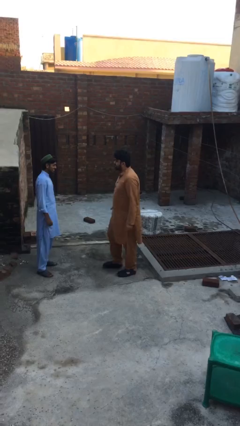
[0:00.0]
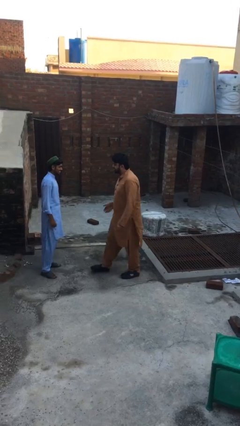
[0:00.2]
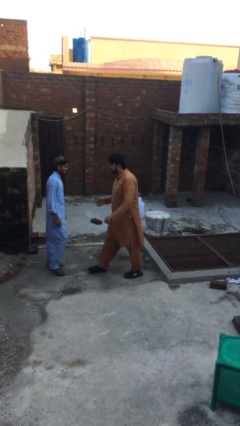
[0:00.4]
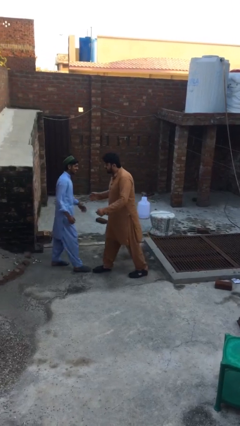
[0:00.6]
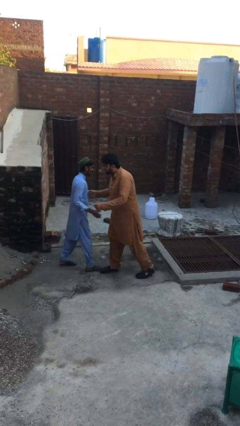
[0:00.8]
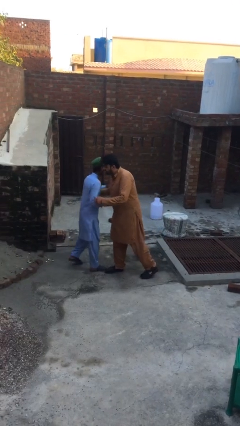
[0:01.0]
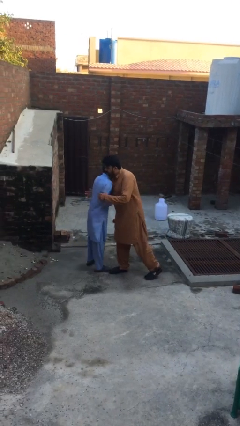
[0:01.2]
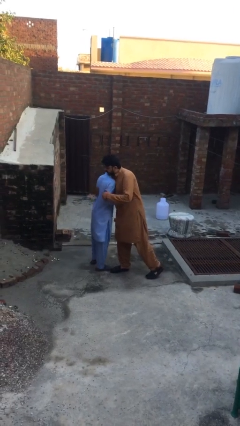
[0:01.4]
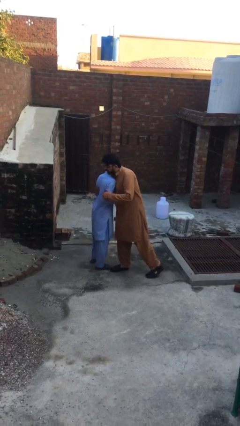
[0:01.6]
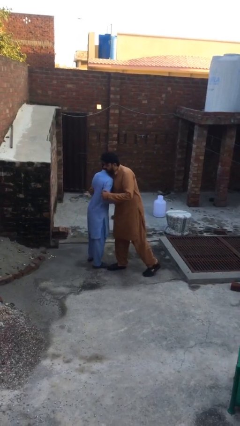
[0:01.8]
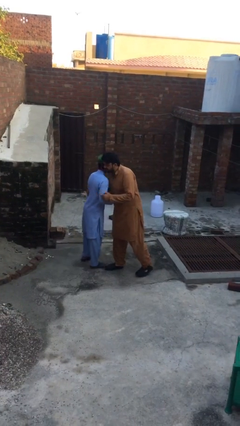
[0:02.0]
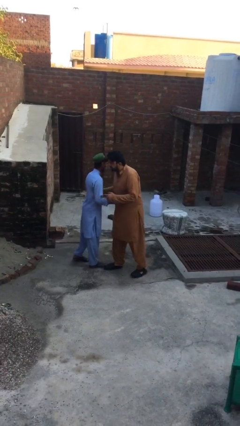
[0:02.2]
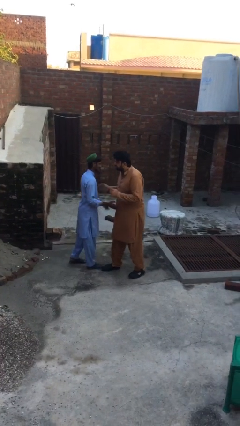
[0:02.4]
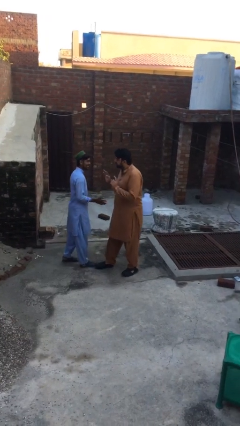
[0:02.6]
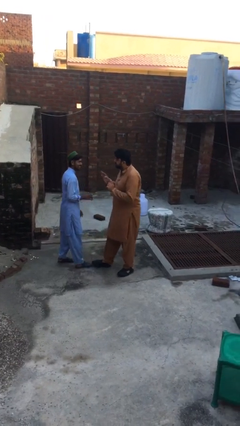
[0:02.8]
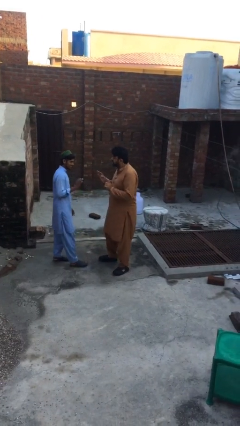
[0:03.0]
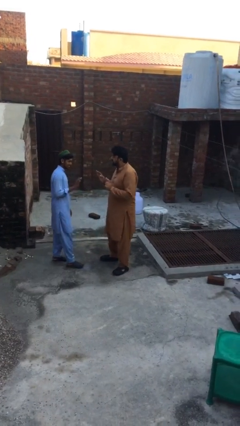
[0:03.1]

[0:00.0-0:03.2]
person embraces person

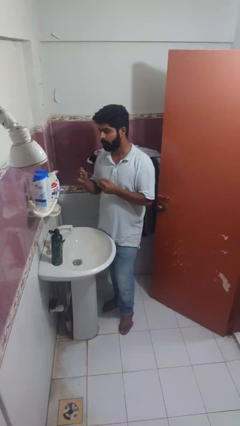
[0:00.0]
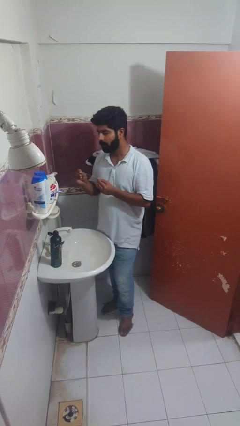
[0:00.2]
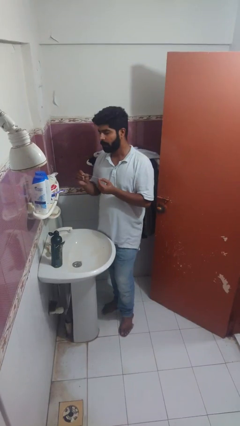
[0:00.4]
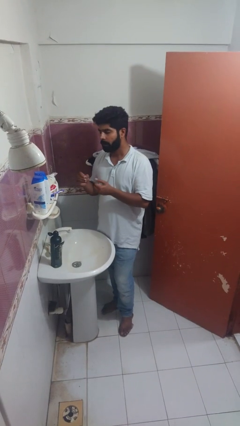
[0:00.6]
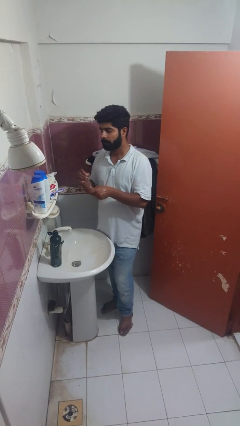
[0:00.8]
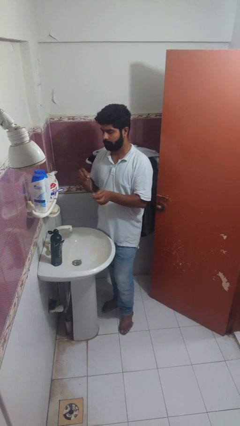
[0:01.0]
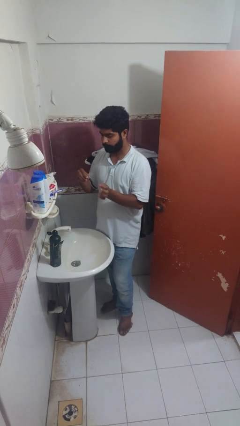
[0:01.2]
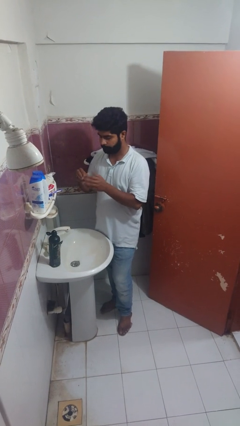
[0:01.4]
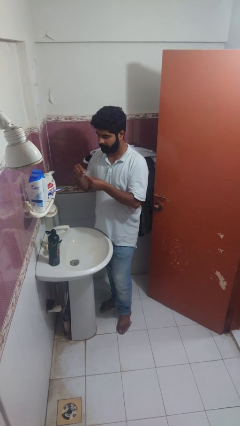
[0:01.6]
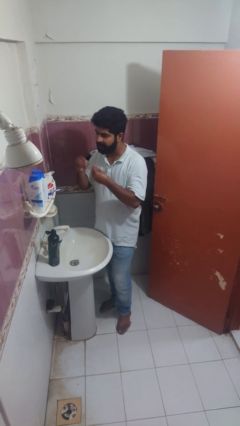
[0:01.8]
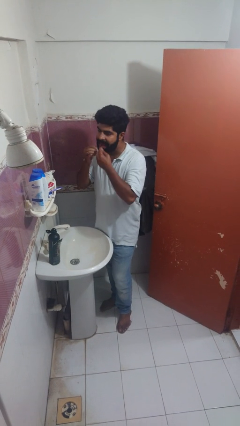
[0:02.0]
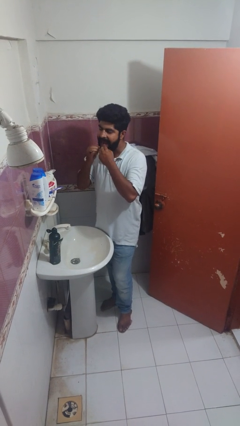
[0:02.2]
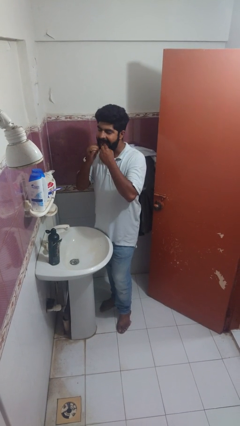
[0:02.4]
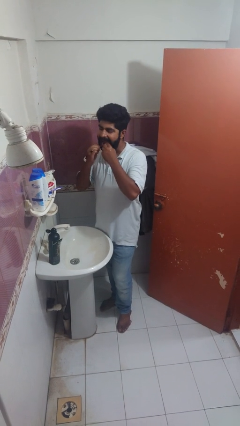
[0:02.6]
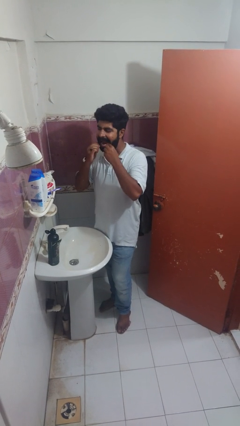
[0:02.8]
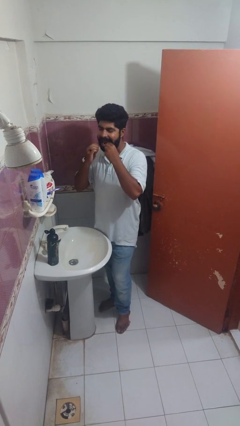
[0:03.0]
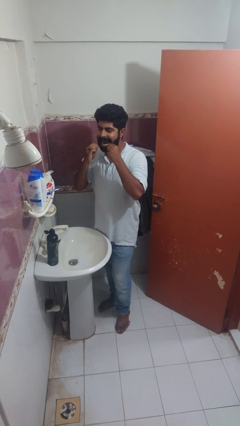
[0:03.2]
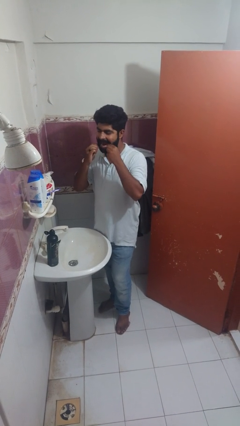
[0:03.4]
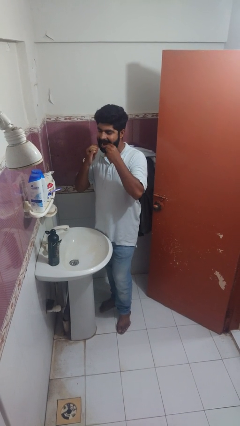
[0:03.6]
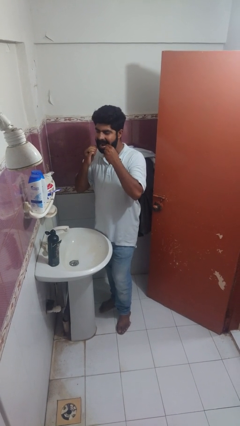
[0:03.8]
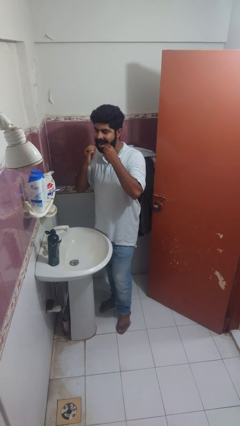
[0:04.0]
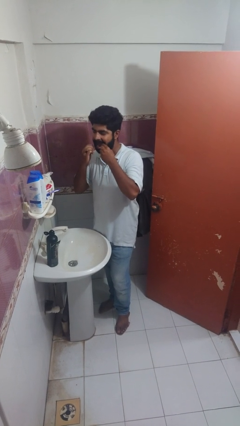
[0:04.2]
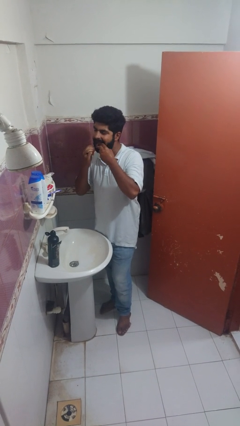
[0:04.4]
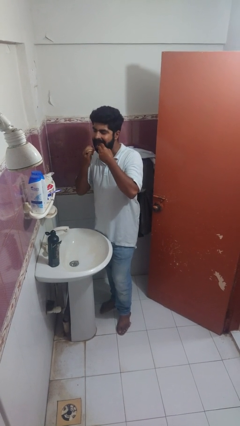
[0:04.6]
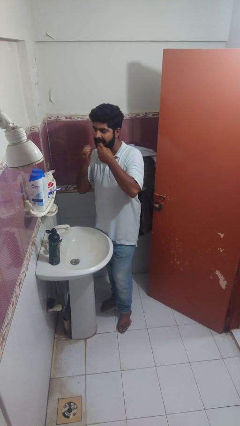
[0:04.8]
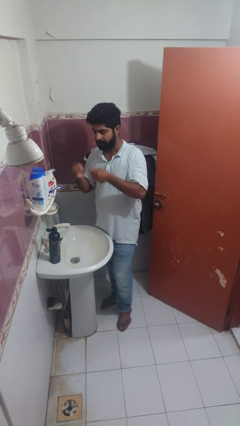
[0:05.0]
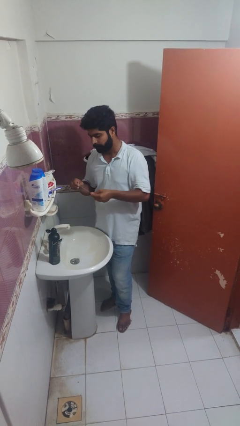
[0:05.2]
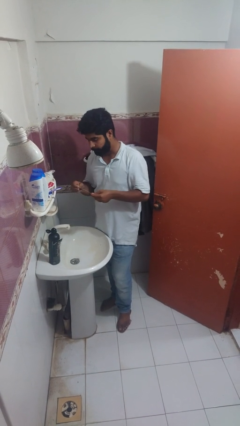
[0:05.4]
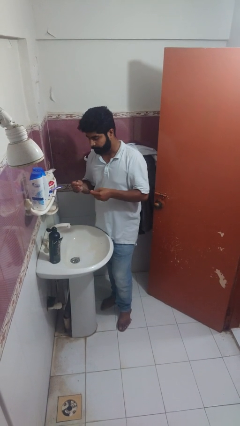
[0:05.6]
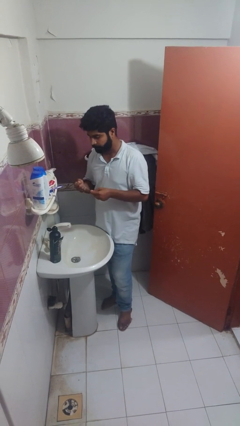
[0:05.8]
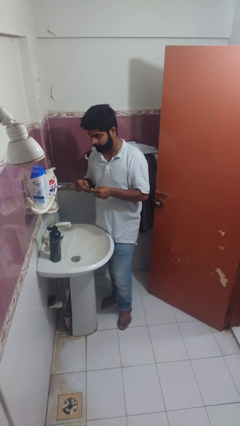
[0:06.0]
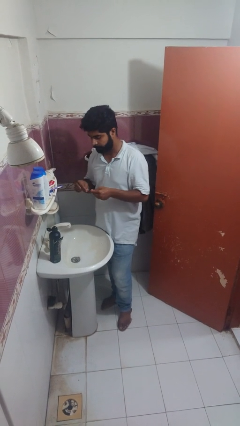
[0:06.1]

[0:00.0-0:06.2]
person flosses

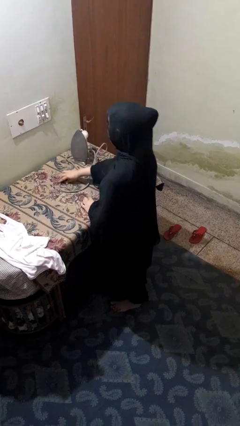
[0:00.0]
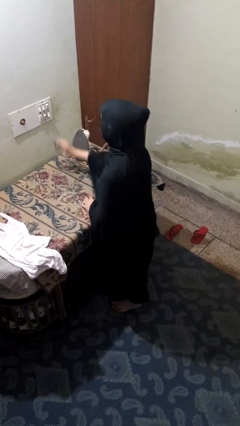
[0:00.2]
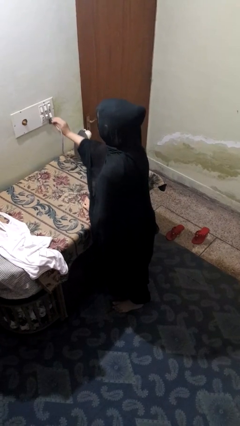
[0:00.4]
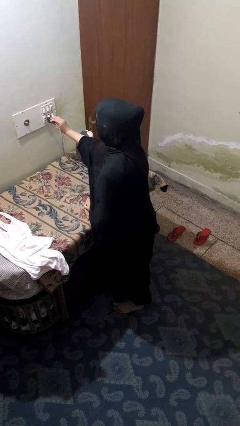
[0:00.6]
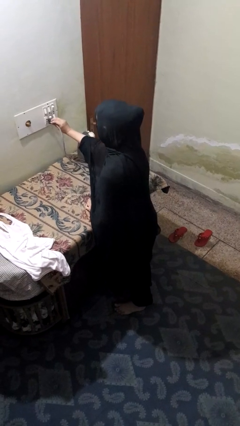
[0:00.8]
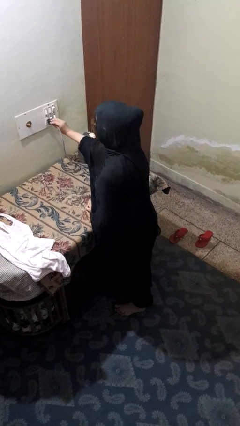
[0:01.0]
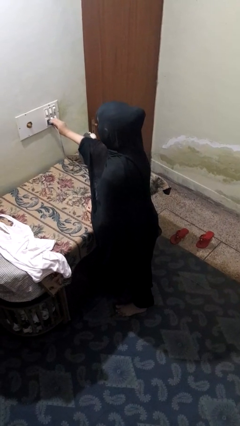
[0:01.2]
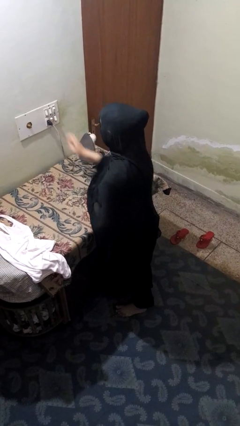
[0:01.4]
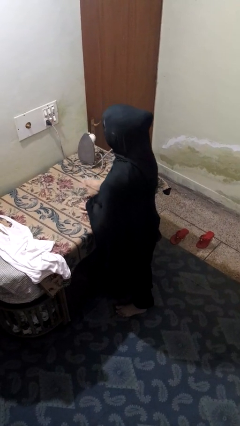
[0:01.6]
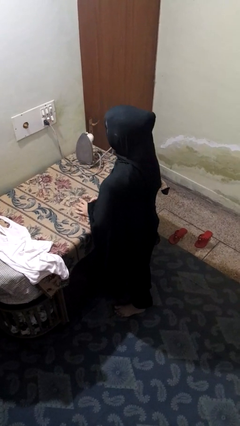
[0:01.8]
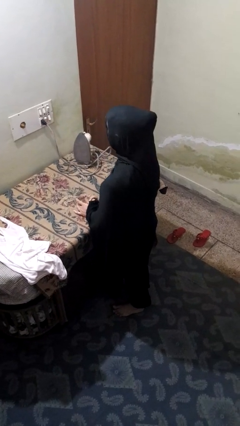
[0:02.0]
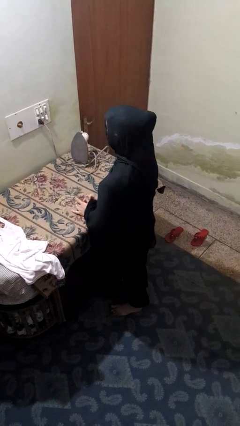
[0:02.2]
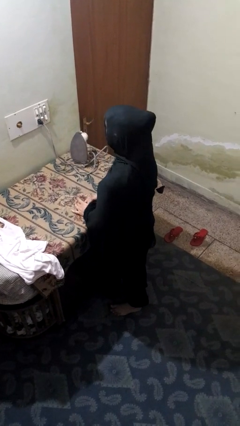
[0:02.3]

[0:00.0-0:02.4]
person plugs into electrical socket

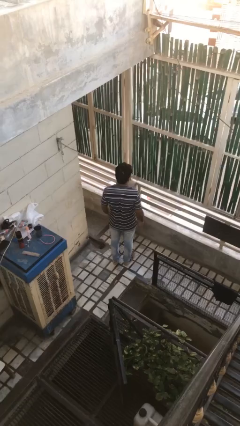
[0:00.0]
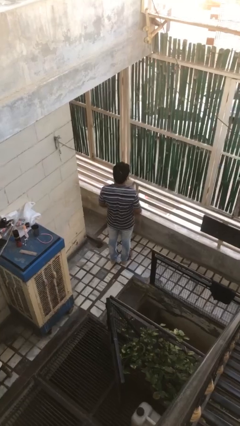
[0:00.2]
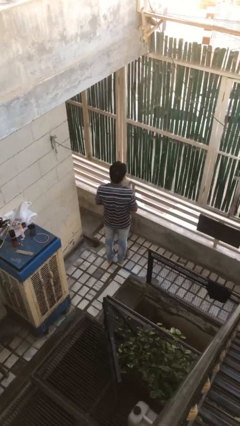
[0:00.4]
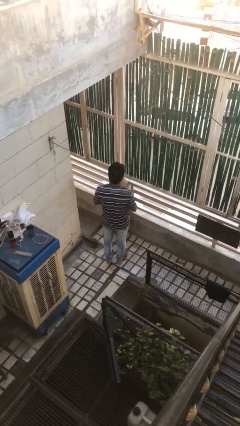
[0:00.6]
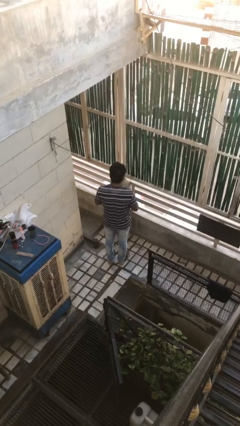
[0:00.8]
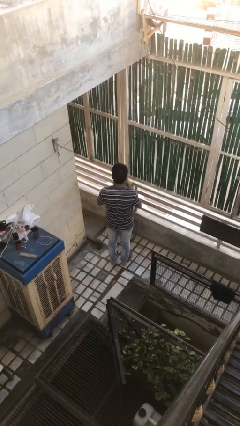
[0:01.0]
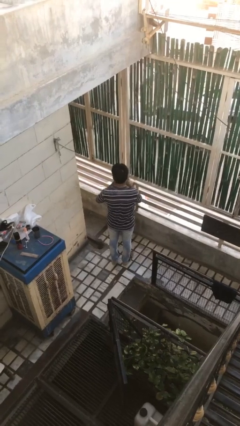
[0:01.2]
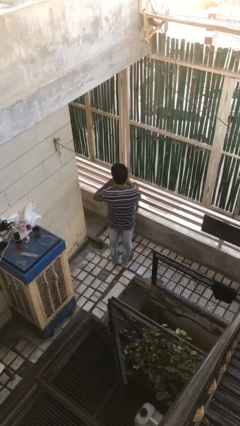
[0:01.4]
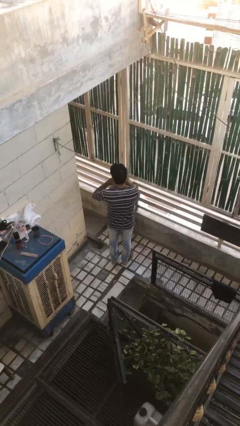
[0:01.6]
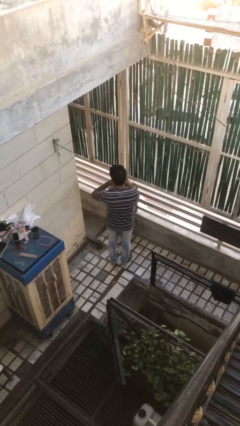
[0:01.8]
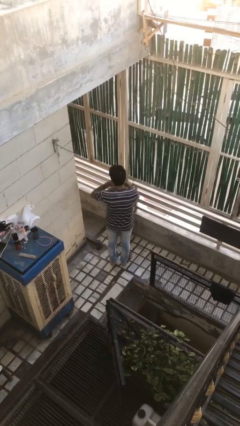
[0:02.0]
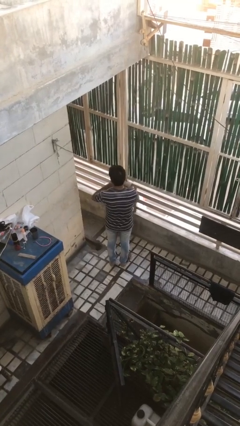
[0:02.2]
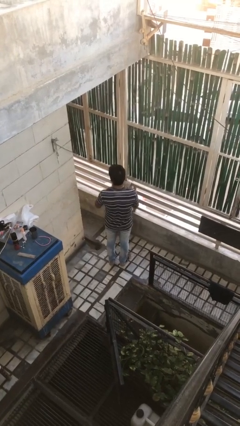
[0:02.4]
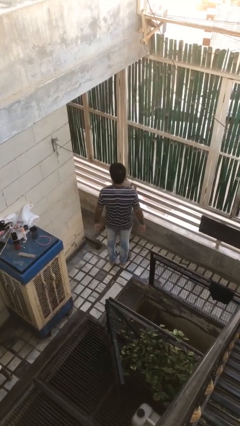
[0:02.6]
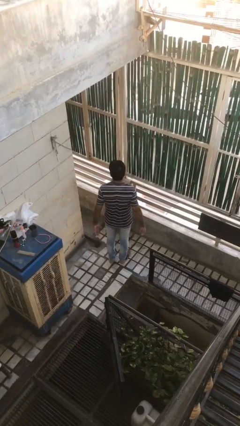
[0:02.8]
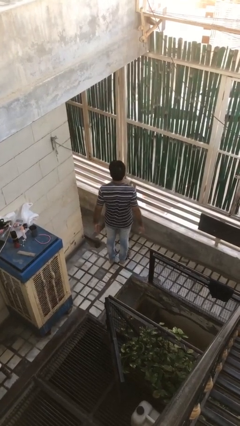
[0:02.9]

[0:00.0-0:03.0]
person puts on ring

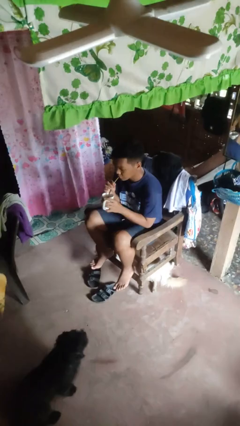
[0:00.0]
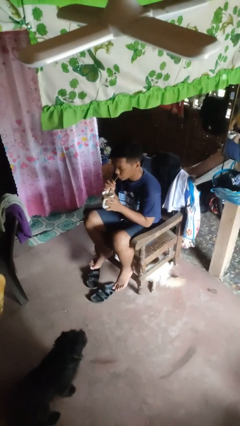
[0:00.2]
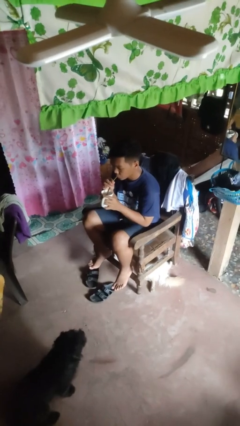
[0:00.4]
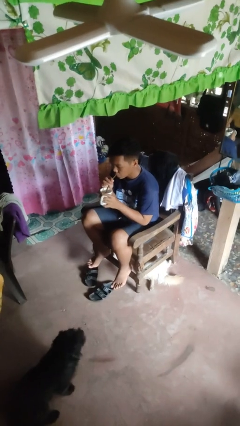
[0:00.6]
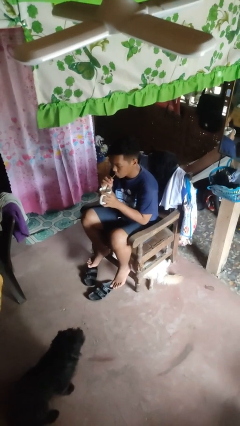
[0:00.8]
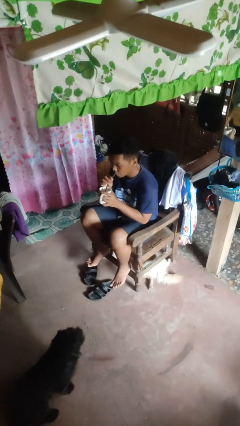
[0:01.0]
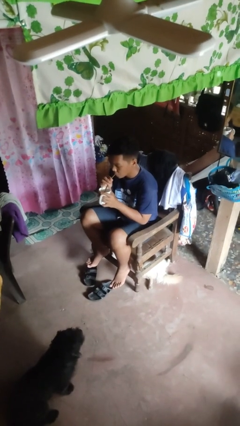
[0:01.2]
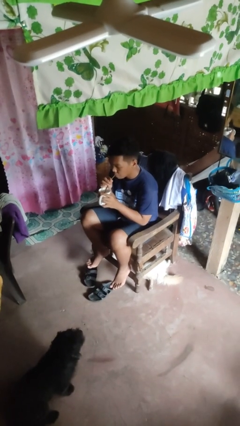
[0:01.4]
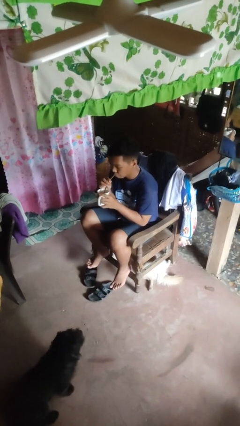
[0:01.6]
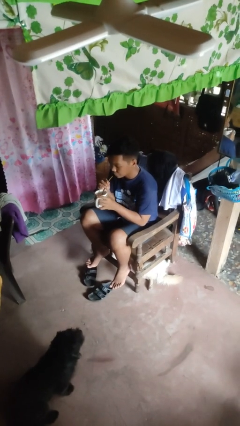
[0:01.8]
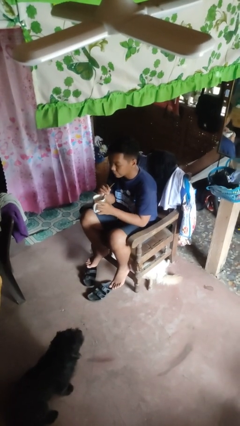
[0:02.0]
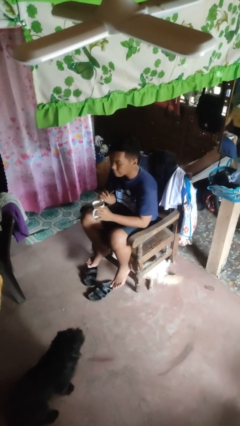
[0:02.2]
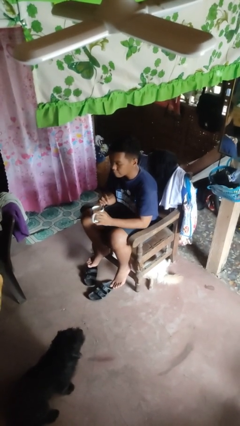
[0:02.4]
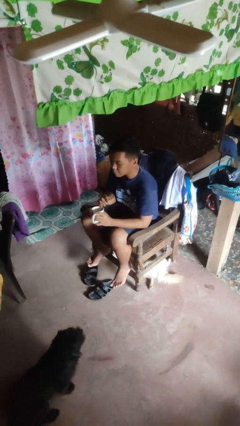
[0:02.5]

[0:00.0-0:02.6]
person drinks from straw

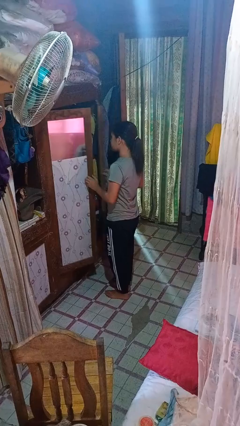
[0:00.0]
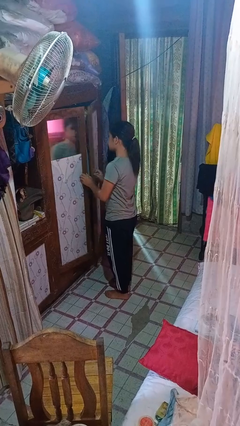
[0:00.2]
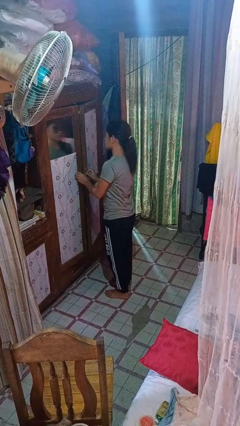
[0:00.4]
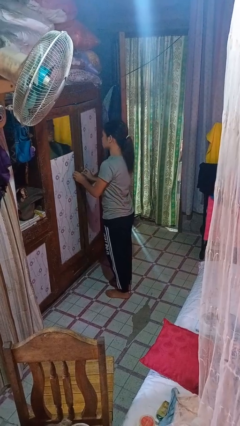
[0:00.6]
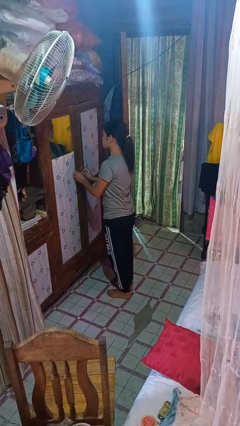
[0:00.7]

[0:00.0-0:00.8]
person closes closet door
